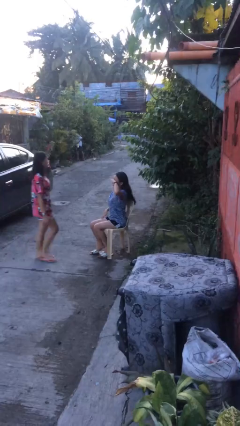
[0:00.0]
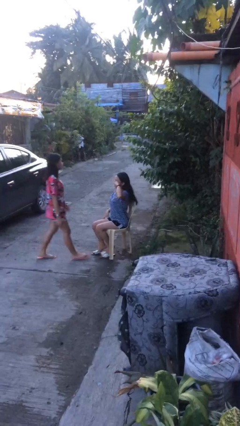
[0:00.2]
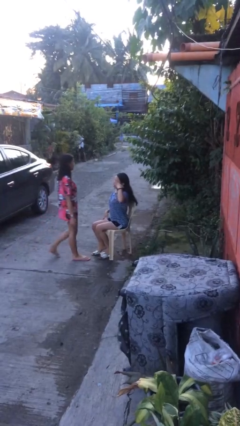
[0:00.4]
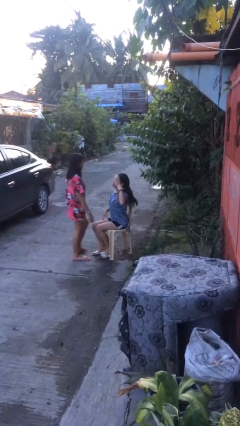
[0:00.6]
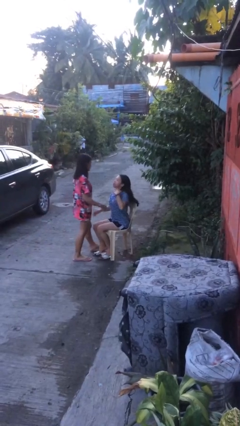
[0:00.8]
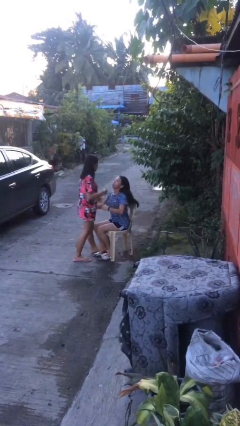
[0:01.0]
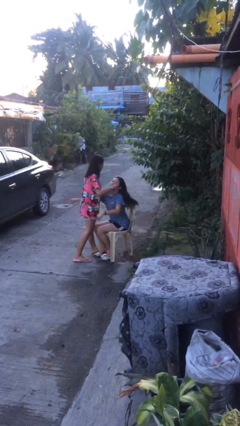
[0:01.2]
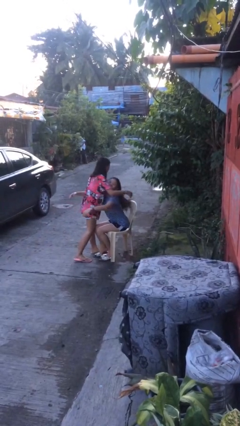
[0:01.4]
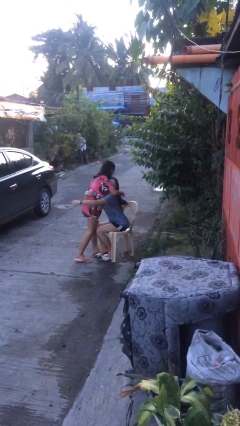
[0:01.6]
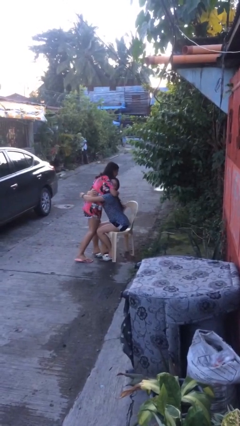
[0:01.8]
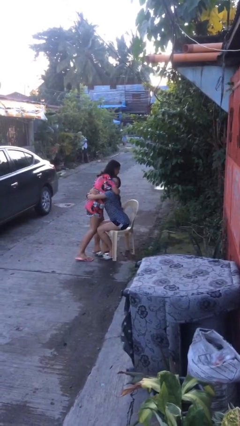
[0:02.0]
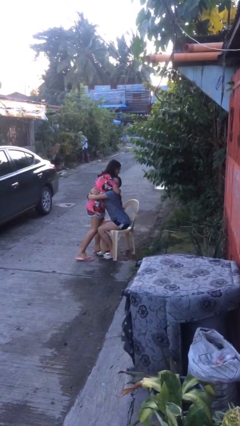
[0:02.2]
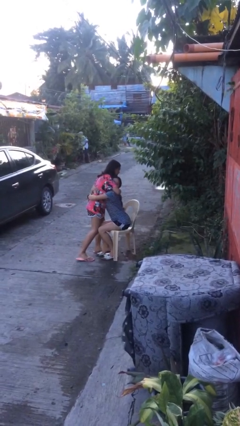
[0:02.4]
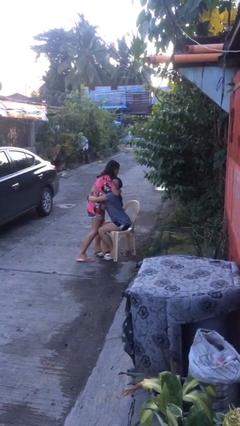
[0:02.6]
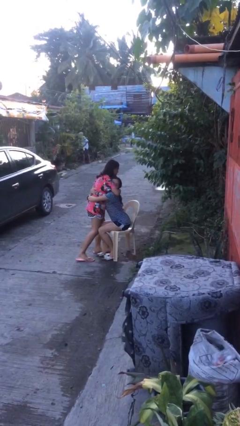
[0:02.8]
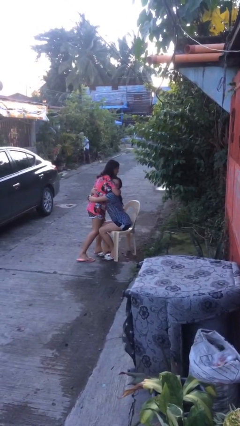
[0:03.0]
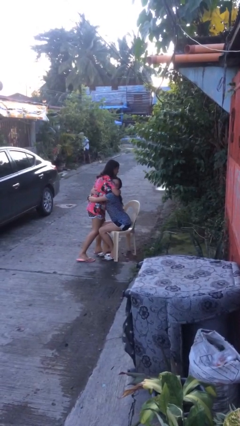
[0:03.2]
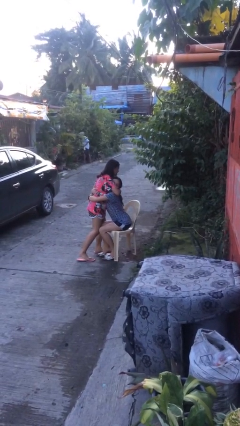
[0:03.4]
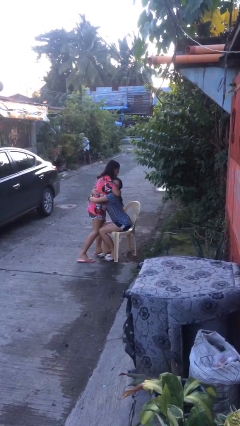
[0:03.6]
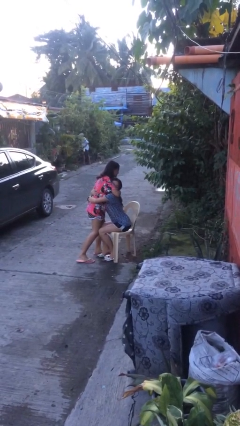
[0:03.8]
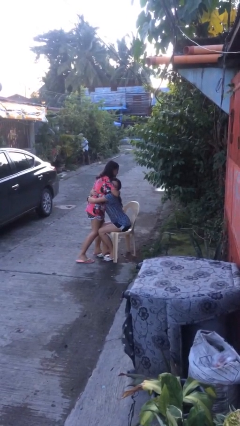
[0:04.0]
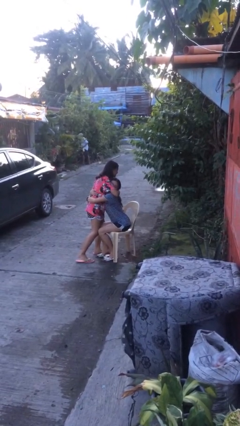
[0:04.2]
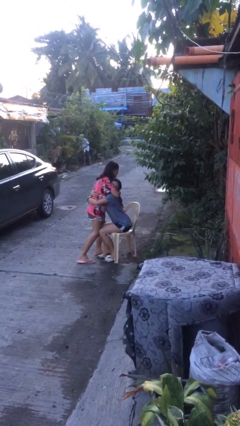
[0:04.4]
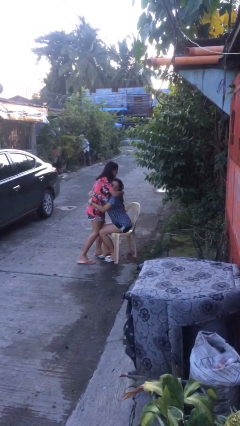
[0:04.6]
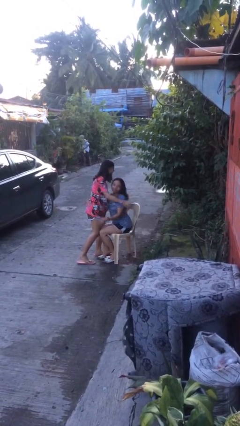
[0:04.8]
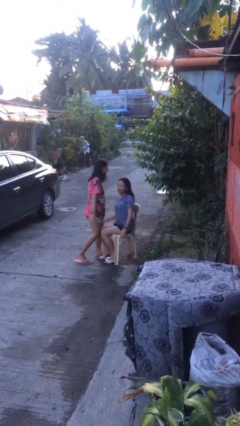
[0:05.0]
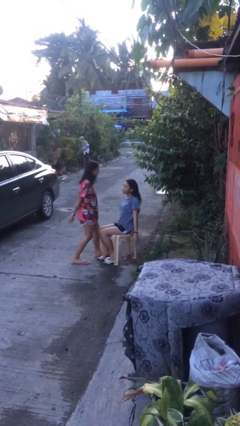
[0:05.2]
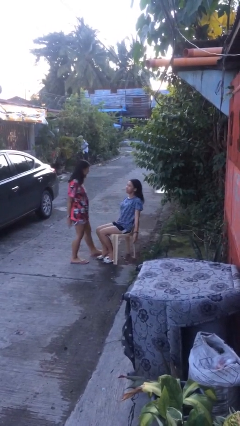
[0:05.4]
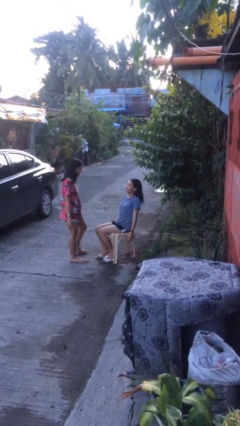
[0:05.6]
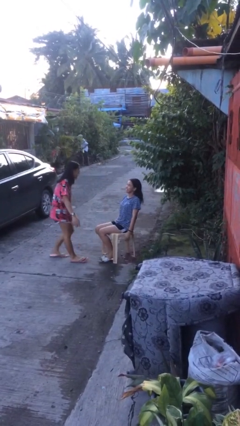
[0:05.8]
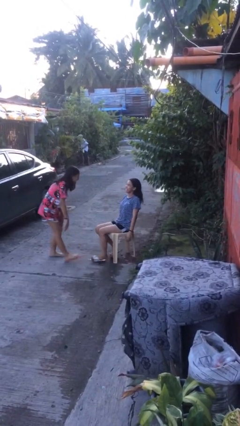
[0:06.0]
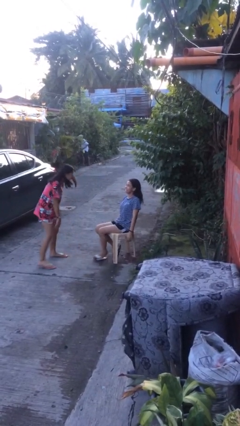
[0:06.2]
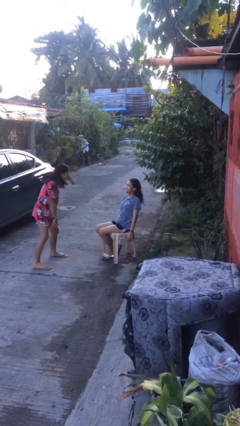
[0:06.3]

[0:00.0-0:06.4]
person embraces person

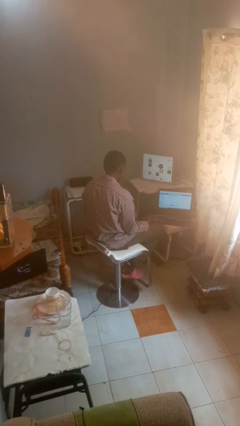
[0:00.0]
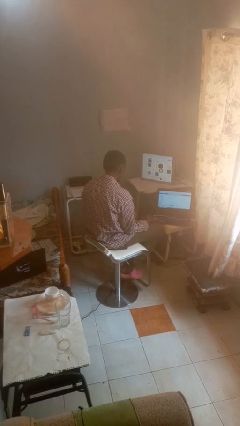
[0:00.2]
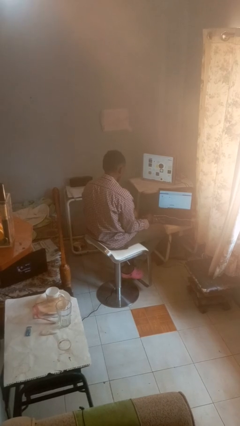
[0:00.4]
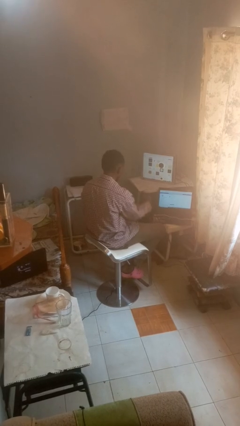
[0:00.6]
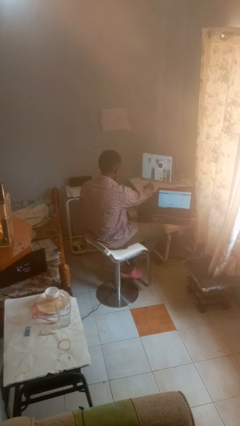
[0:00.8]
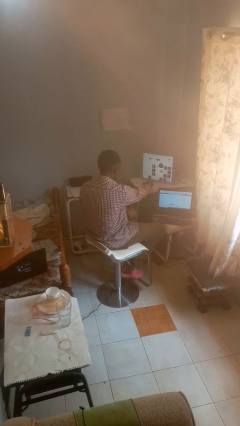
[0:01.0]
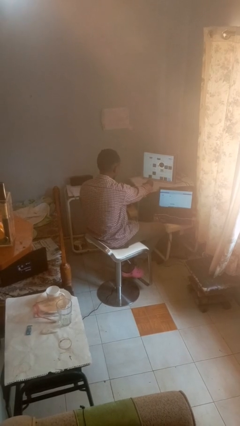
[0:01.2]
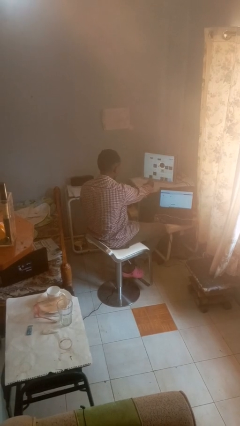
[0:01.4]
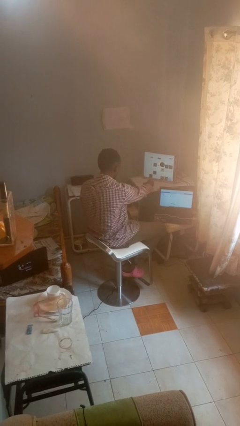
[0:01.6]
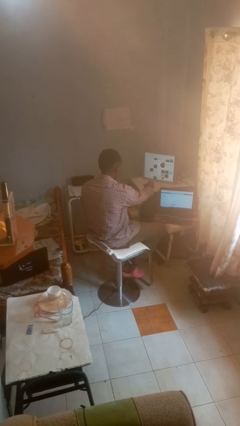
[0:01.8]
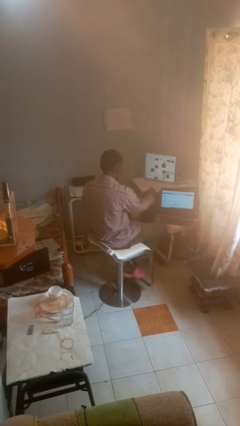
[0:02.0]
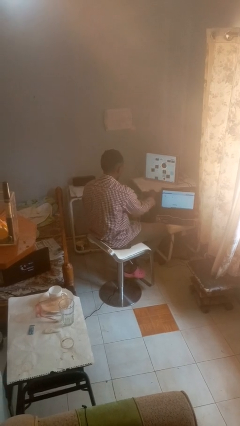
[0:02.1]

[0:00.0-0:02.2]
person uses television remote

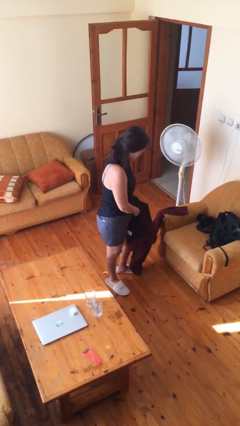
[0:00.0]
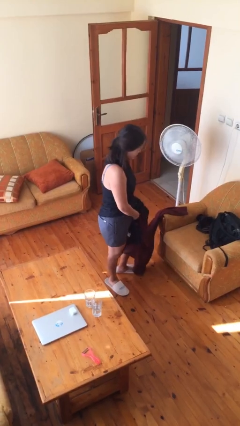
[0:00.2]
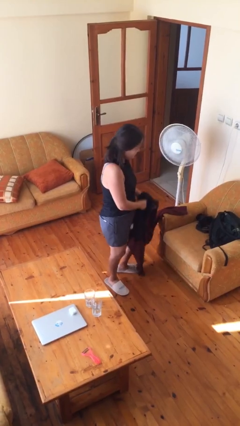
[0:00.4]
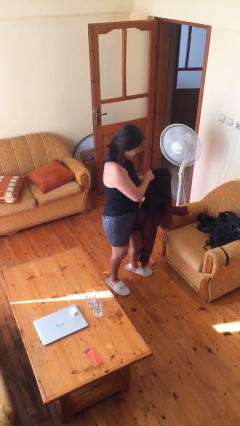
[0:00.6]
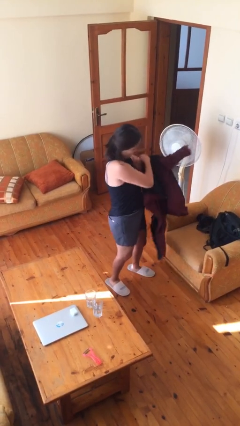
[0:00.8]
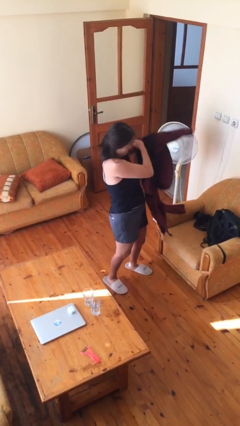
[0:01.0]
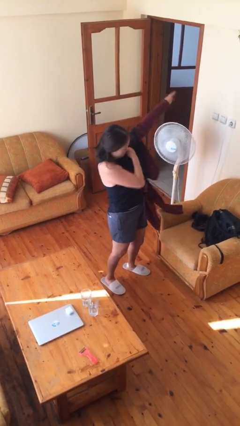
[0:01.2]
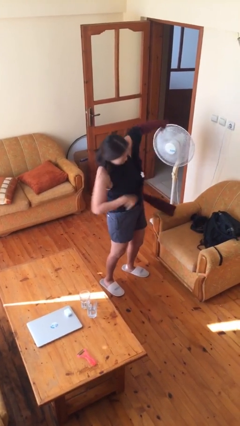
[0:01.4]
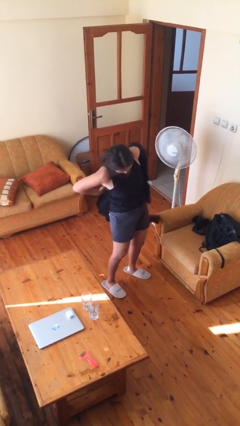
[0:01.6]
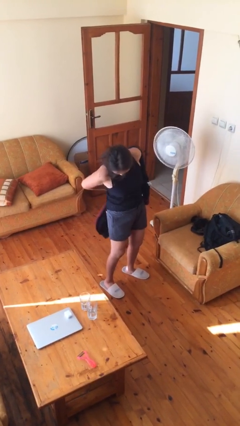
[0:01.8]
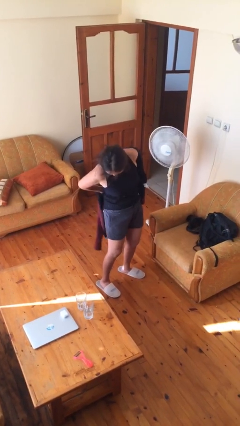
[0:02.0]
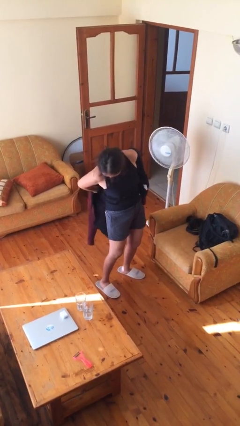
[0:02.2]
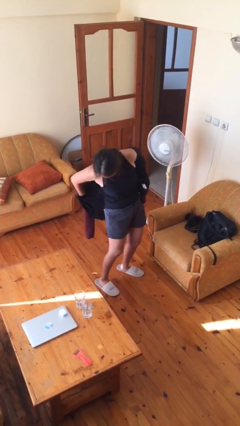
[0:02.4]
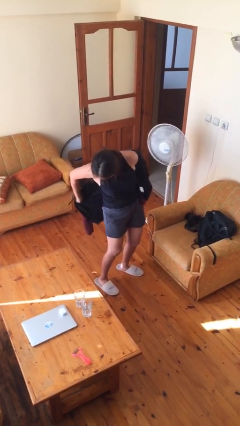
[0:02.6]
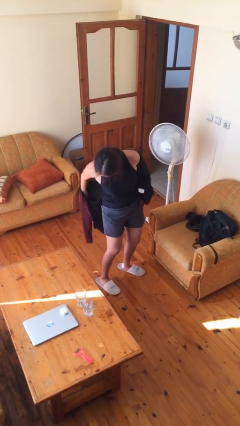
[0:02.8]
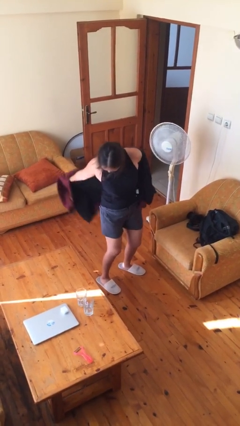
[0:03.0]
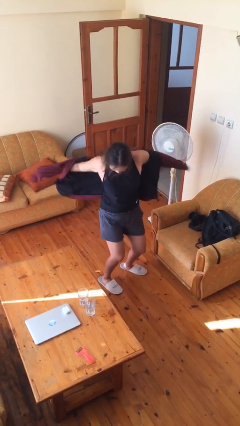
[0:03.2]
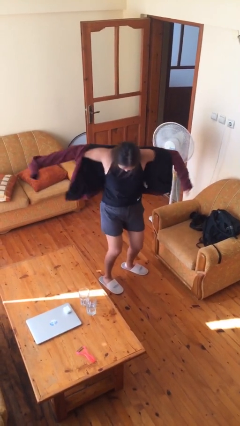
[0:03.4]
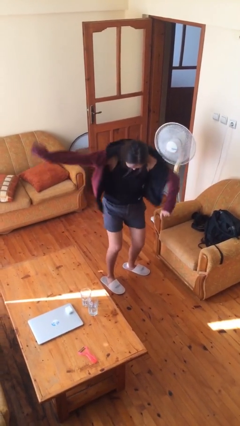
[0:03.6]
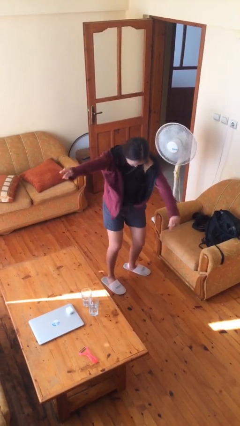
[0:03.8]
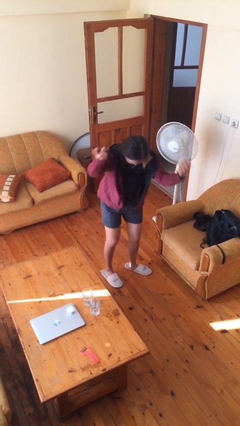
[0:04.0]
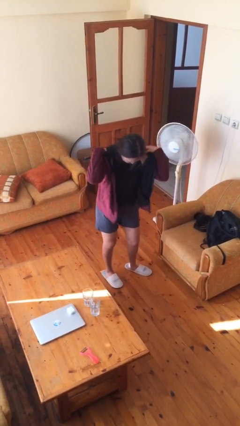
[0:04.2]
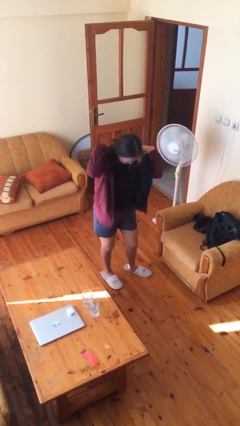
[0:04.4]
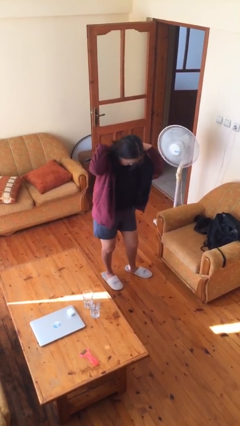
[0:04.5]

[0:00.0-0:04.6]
person puts on hoodie

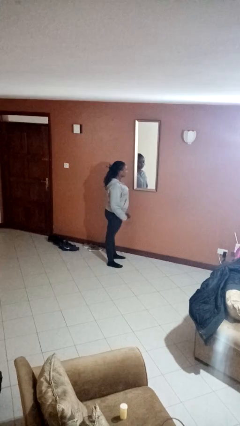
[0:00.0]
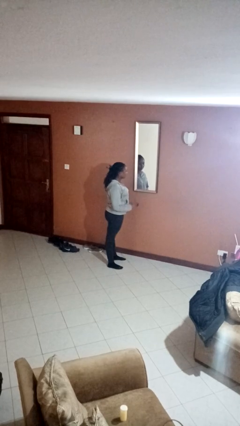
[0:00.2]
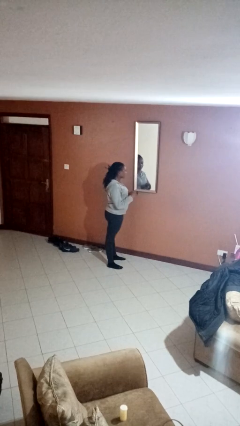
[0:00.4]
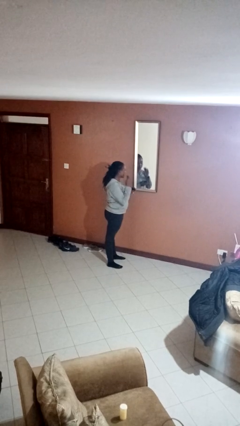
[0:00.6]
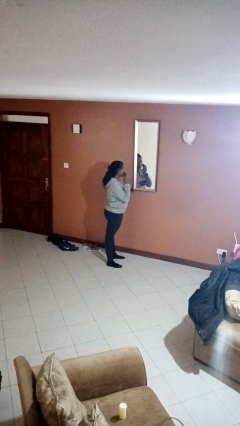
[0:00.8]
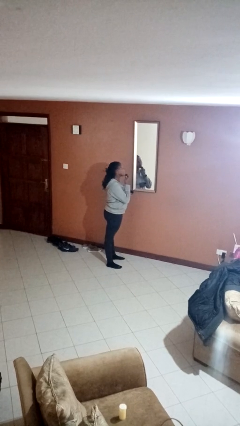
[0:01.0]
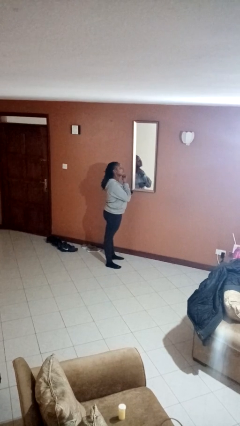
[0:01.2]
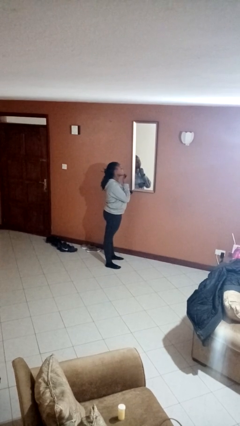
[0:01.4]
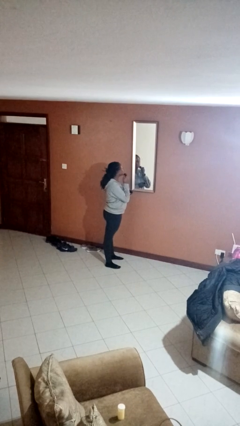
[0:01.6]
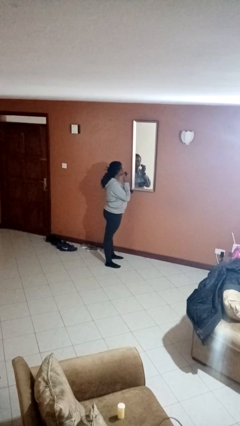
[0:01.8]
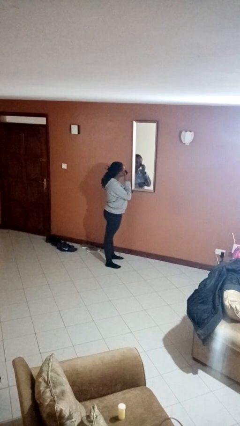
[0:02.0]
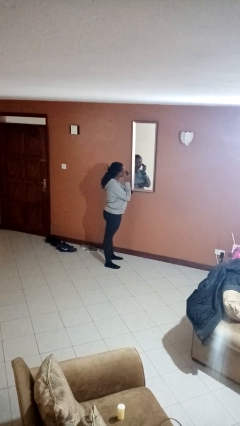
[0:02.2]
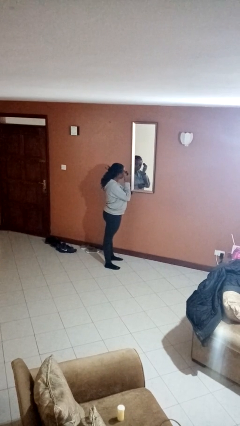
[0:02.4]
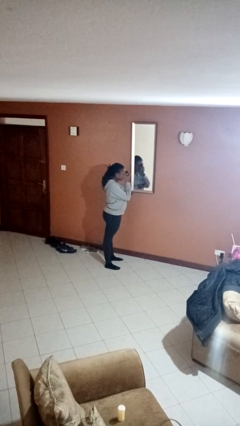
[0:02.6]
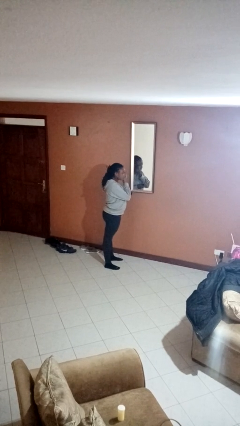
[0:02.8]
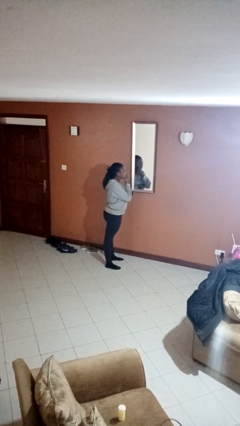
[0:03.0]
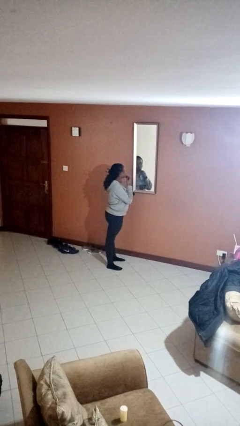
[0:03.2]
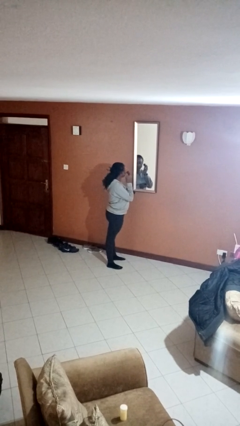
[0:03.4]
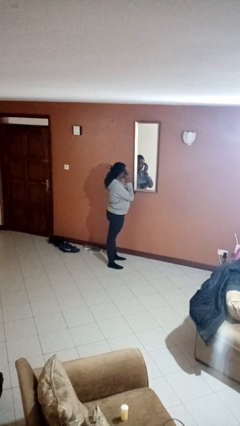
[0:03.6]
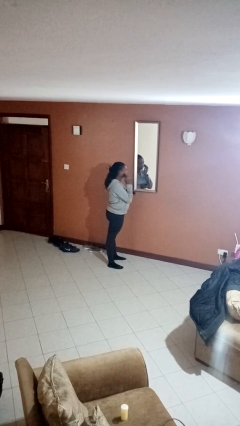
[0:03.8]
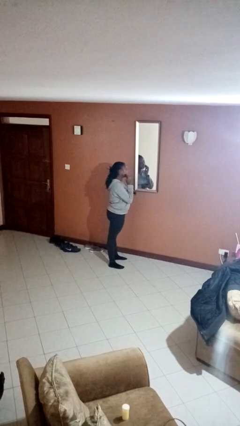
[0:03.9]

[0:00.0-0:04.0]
person applies foundation makeup

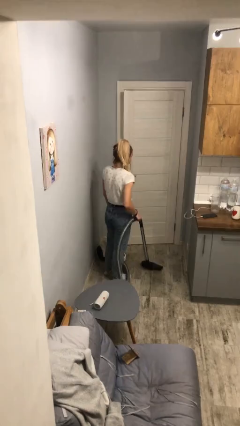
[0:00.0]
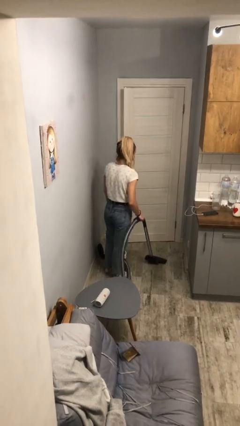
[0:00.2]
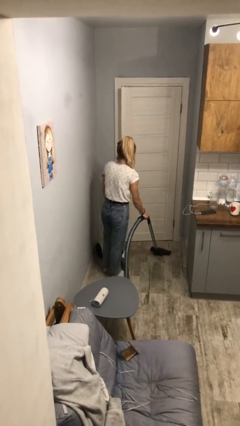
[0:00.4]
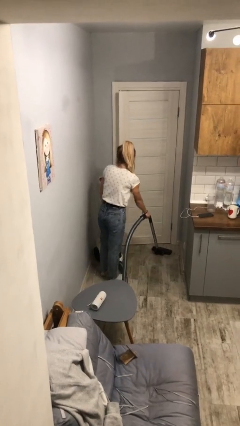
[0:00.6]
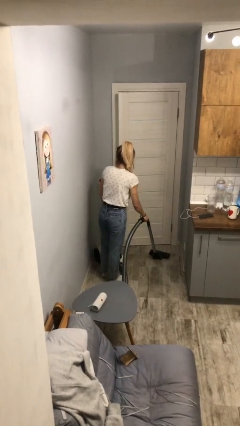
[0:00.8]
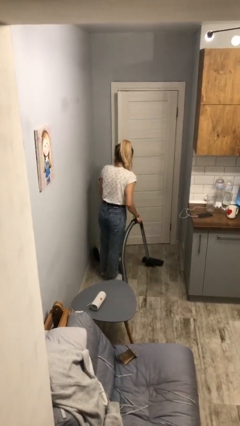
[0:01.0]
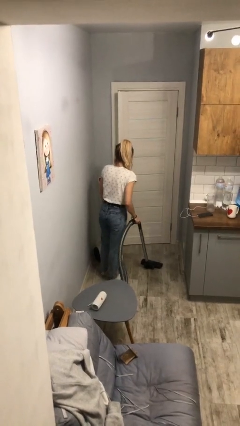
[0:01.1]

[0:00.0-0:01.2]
person vacuums carpet
